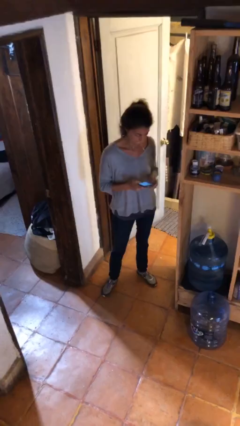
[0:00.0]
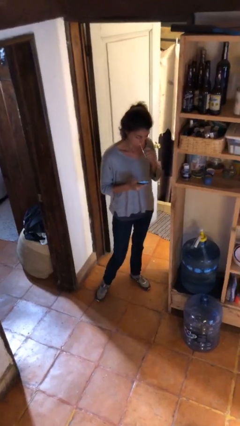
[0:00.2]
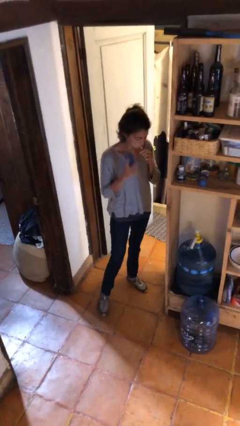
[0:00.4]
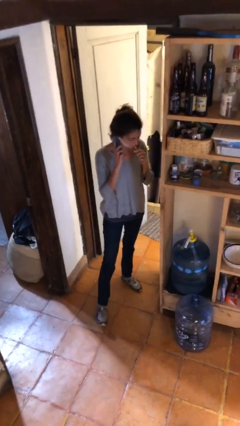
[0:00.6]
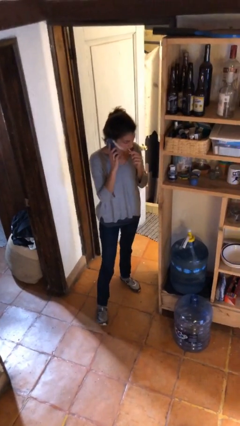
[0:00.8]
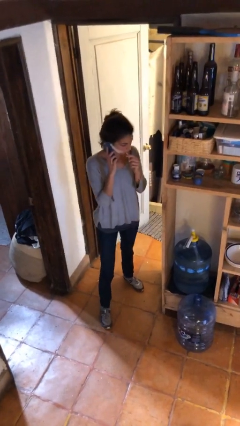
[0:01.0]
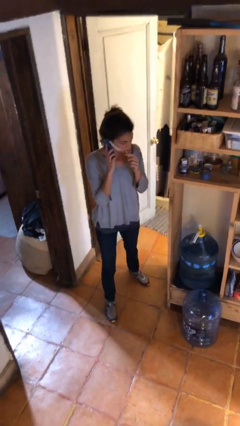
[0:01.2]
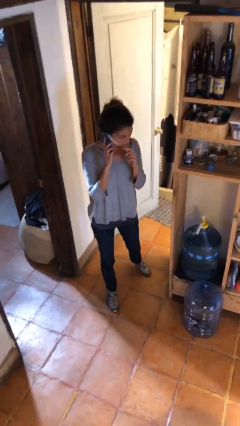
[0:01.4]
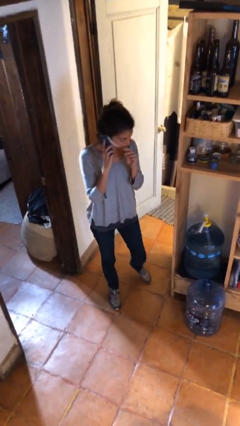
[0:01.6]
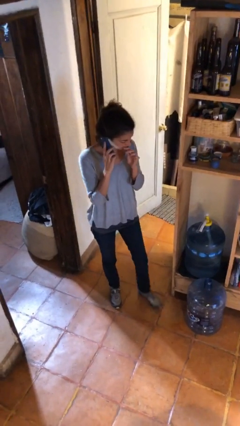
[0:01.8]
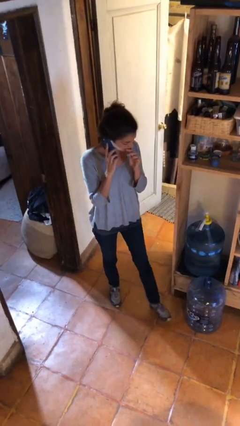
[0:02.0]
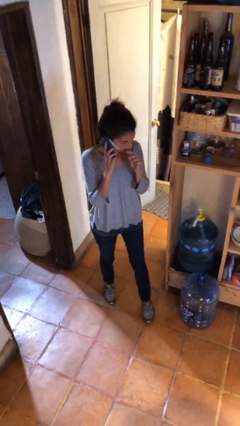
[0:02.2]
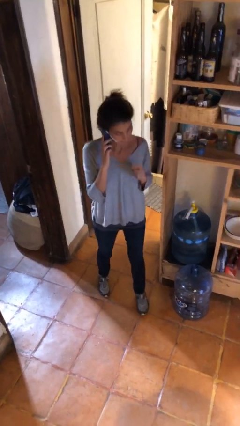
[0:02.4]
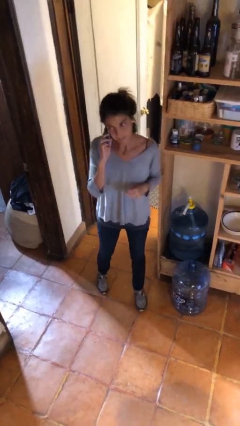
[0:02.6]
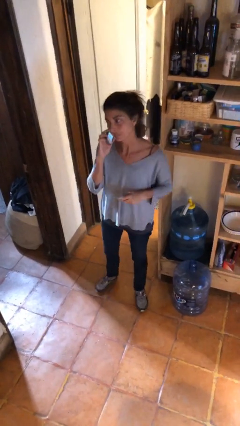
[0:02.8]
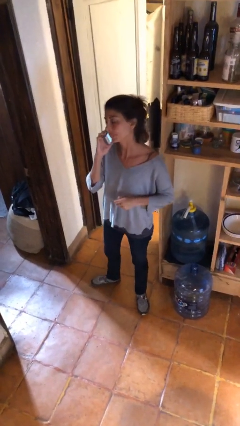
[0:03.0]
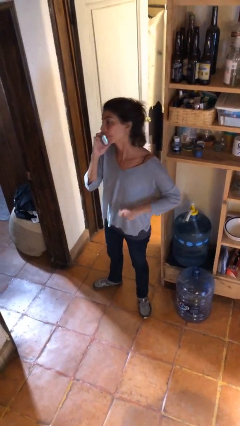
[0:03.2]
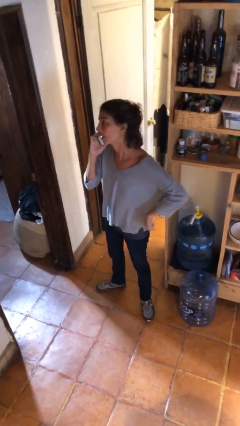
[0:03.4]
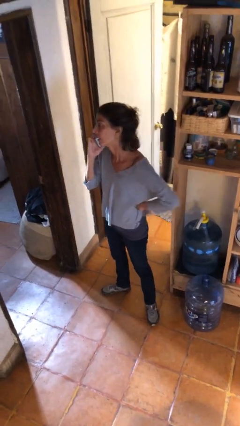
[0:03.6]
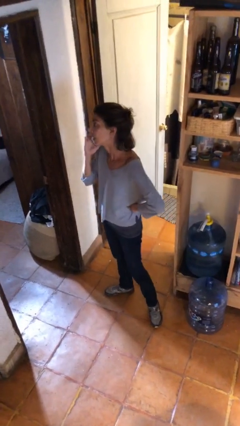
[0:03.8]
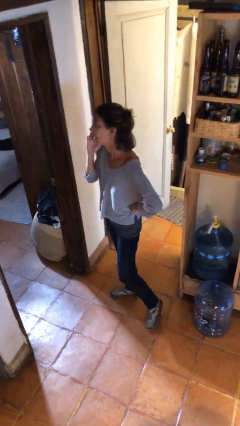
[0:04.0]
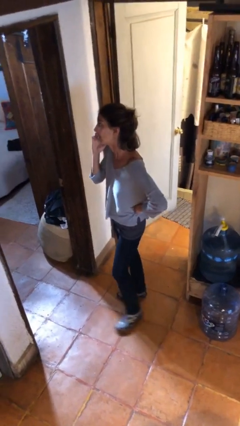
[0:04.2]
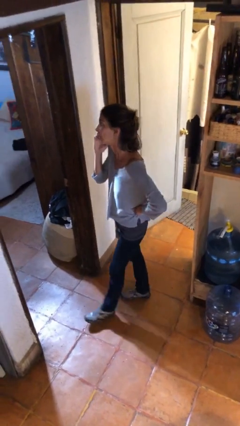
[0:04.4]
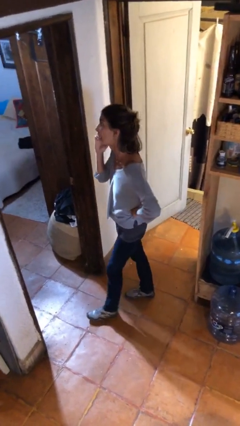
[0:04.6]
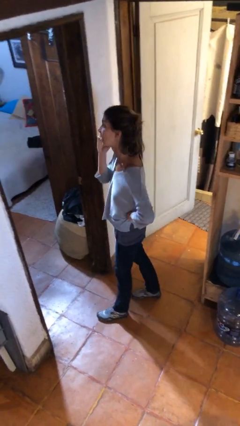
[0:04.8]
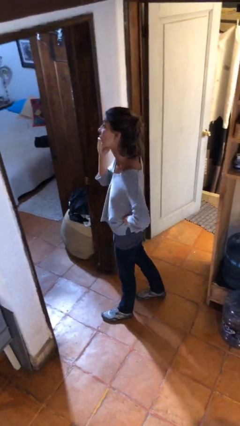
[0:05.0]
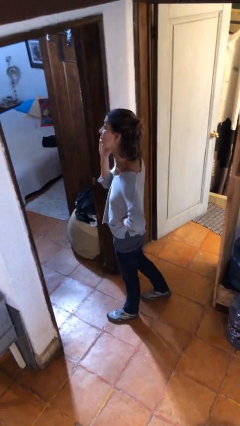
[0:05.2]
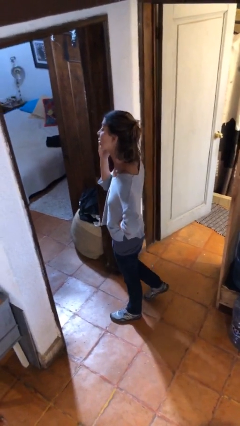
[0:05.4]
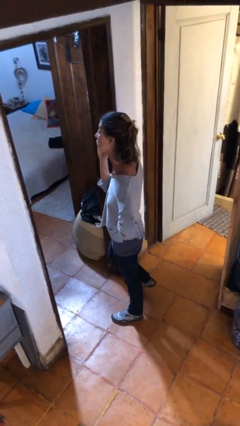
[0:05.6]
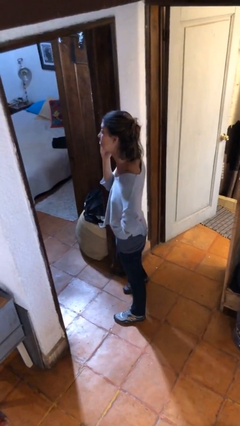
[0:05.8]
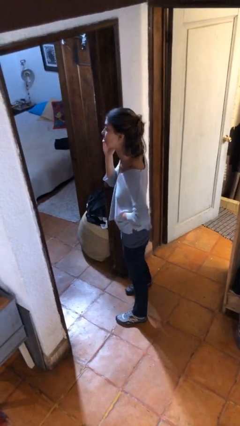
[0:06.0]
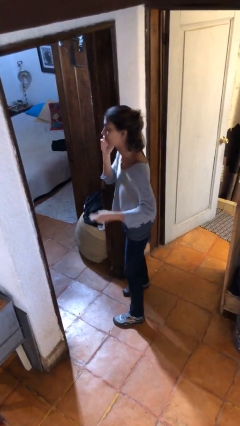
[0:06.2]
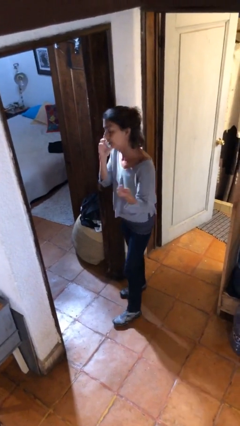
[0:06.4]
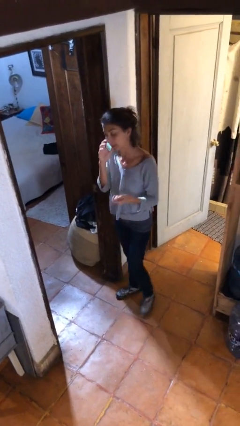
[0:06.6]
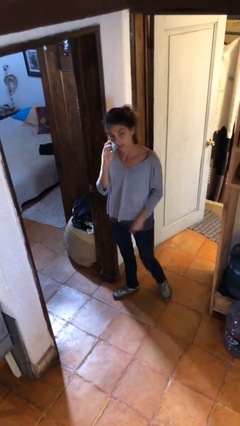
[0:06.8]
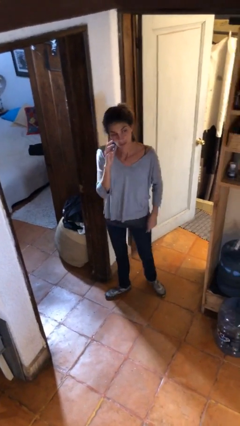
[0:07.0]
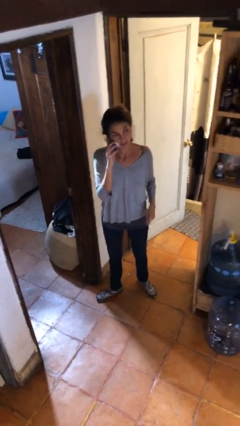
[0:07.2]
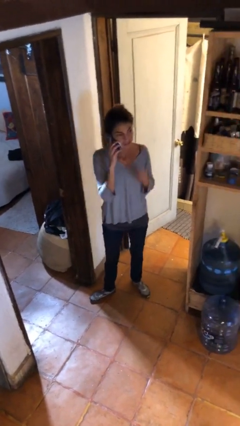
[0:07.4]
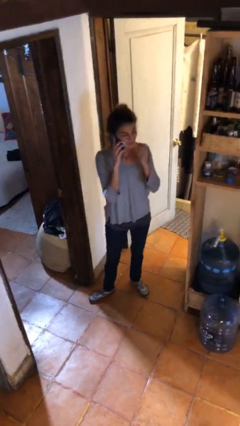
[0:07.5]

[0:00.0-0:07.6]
person talks on phone

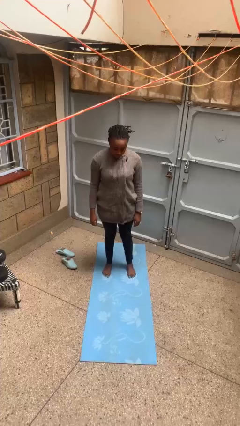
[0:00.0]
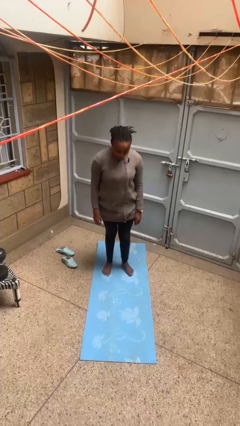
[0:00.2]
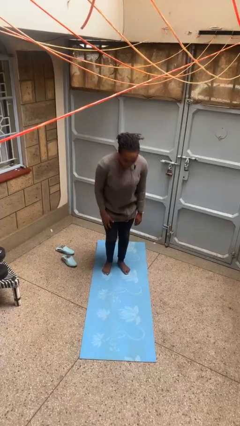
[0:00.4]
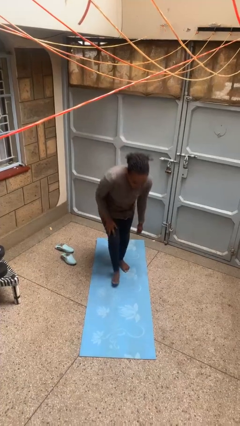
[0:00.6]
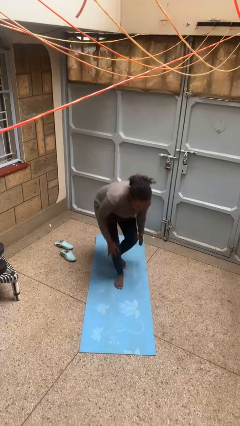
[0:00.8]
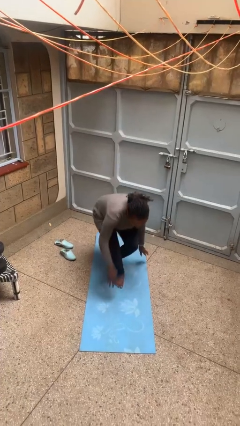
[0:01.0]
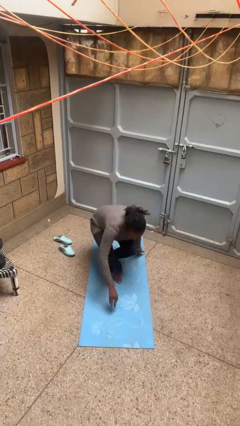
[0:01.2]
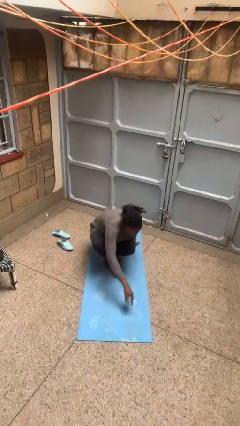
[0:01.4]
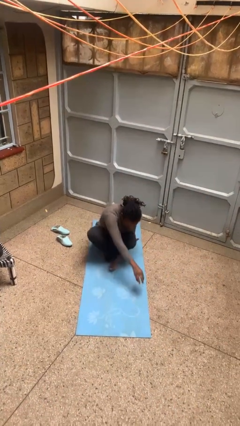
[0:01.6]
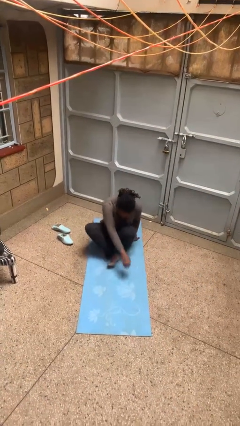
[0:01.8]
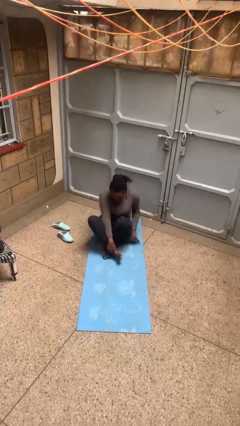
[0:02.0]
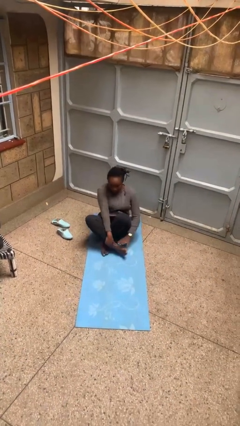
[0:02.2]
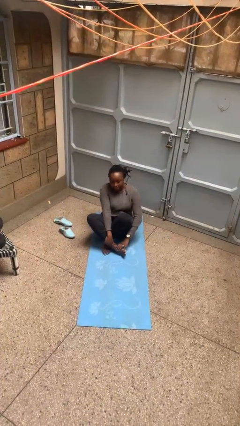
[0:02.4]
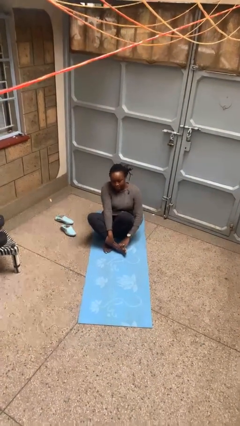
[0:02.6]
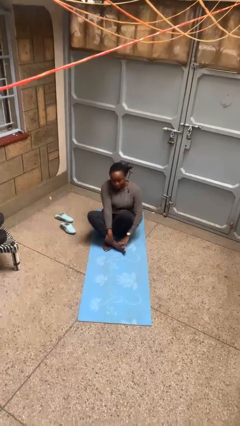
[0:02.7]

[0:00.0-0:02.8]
person sits crisscross

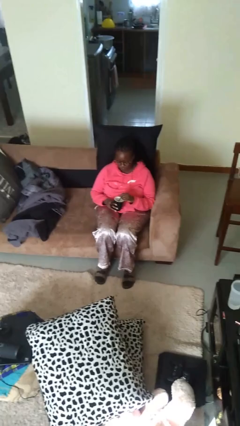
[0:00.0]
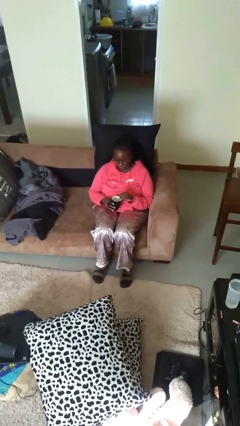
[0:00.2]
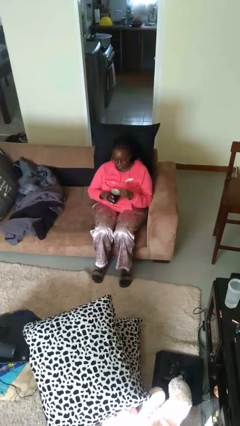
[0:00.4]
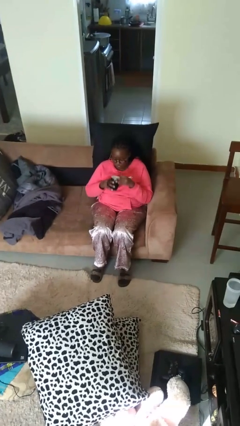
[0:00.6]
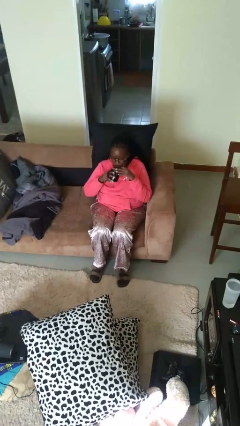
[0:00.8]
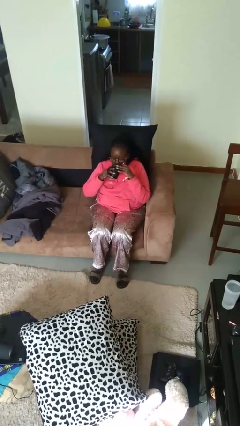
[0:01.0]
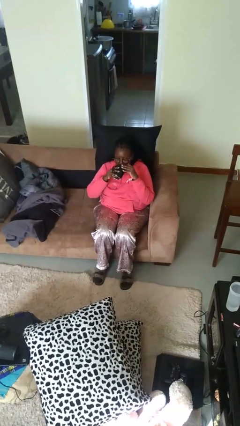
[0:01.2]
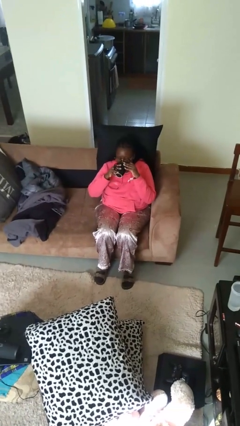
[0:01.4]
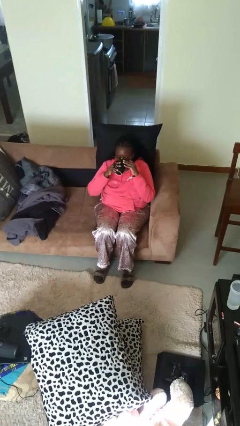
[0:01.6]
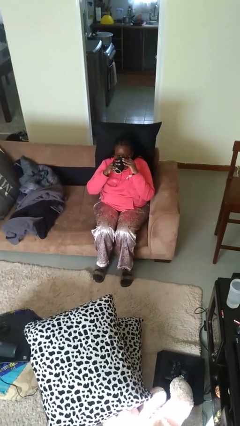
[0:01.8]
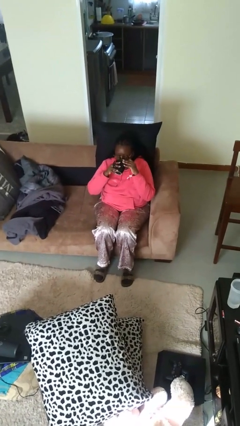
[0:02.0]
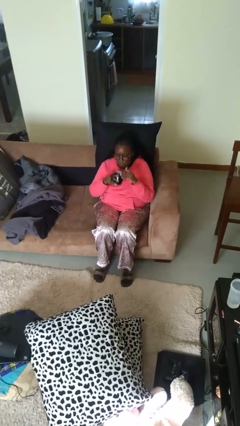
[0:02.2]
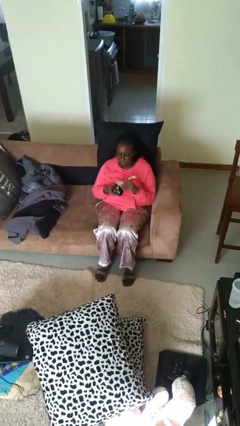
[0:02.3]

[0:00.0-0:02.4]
person drinks from mug

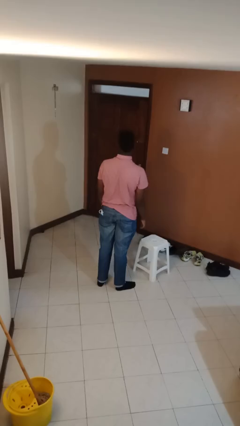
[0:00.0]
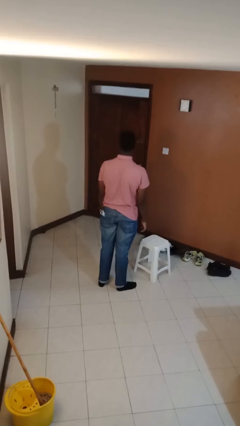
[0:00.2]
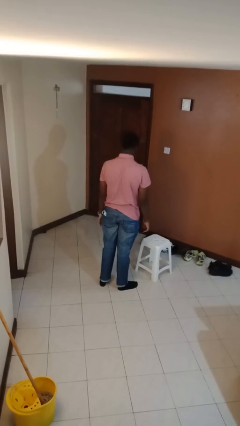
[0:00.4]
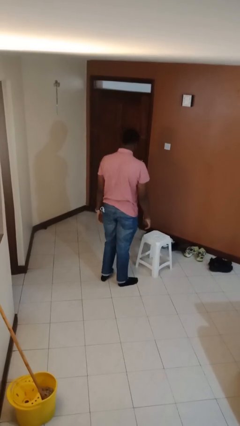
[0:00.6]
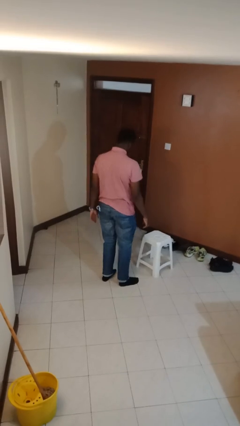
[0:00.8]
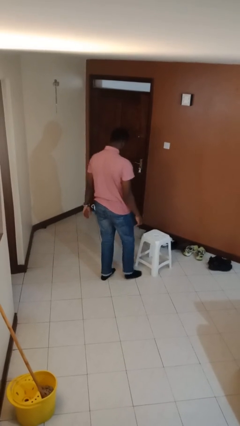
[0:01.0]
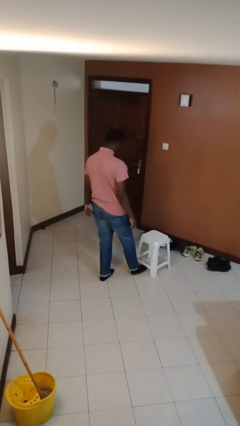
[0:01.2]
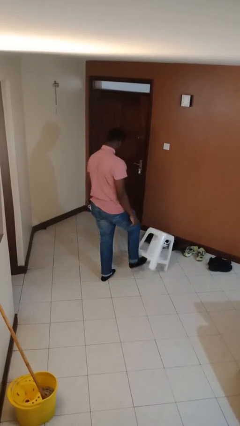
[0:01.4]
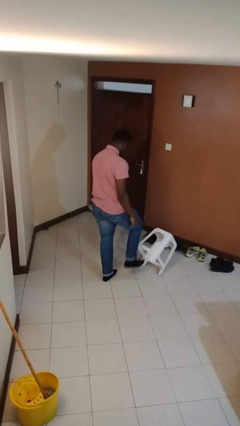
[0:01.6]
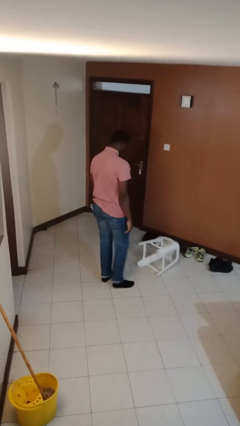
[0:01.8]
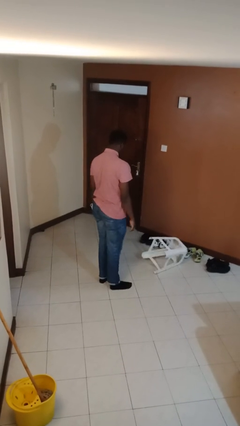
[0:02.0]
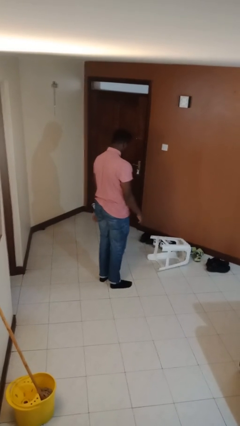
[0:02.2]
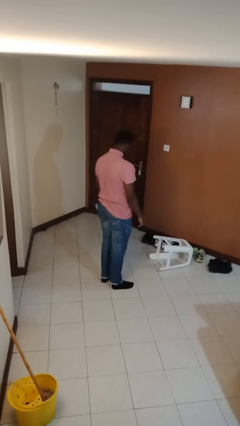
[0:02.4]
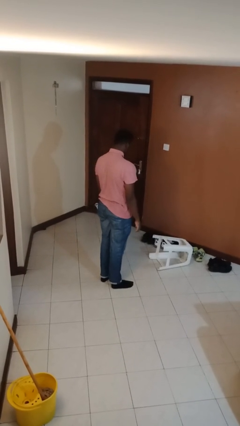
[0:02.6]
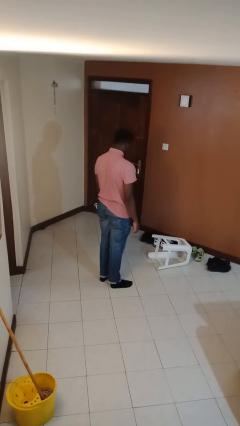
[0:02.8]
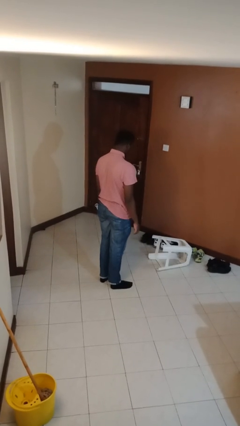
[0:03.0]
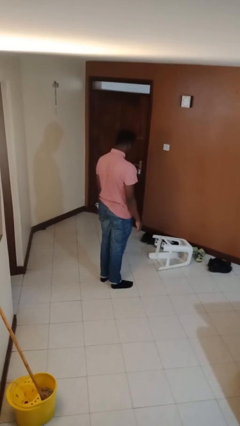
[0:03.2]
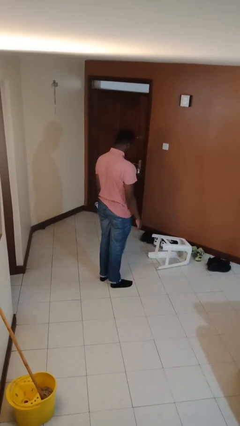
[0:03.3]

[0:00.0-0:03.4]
person knocks over furniture

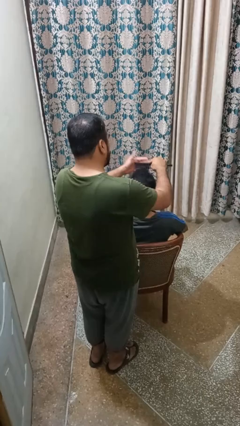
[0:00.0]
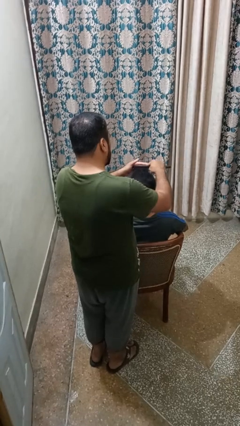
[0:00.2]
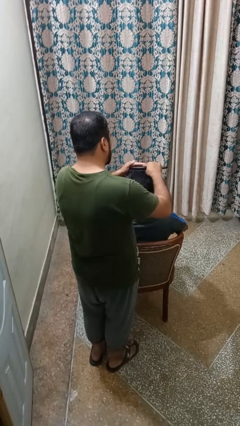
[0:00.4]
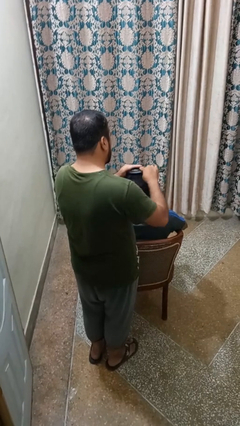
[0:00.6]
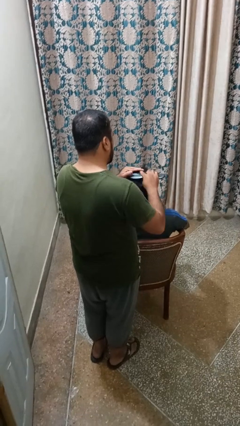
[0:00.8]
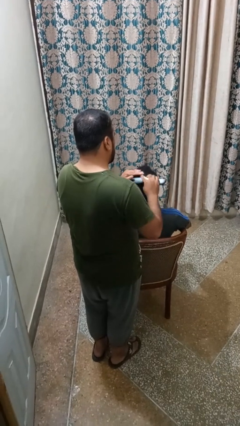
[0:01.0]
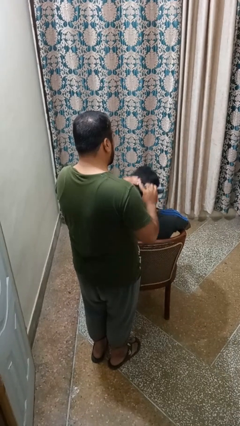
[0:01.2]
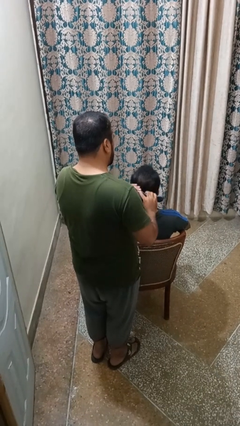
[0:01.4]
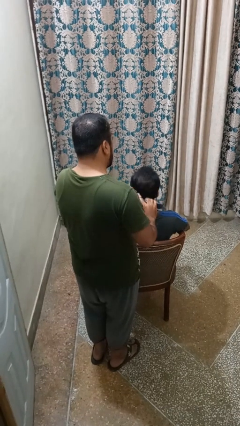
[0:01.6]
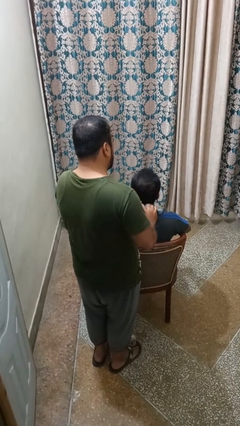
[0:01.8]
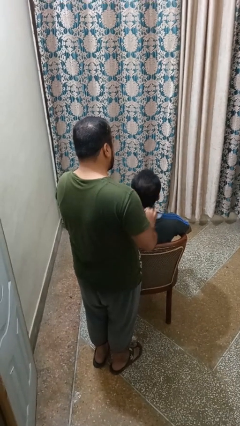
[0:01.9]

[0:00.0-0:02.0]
person brushes hair of person
